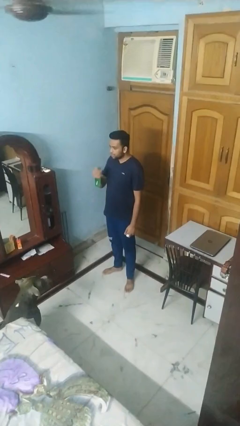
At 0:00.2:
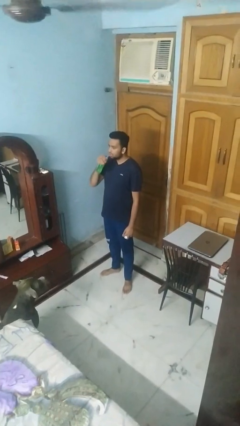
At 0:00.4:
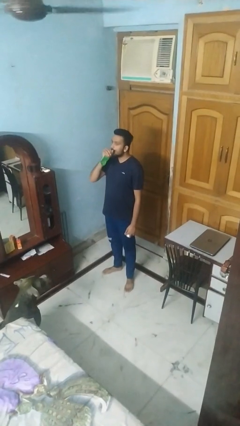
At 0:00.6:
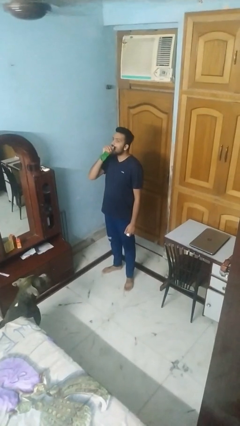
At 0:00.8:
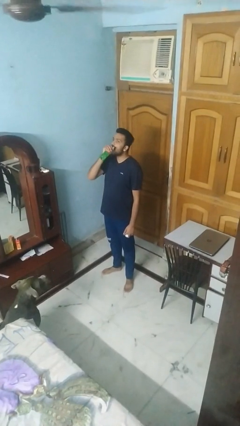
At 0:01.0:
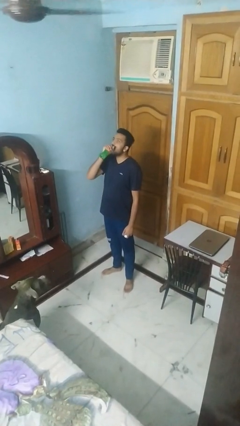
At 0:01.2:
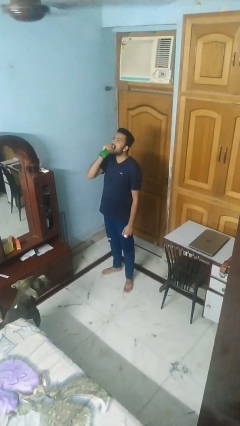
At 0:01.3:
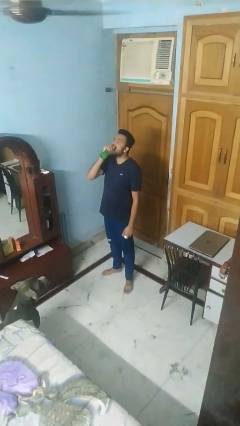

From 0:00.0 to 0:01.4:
person drinks from bottle

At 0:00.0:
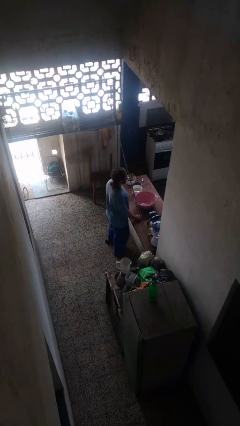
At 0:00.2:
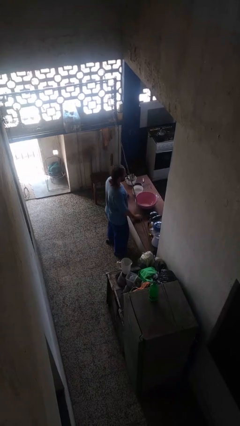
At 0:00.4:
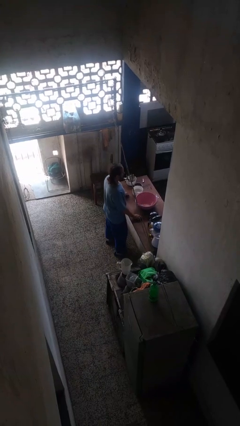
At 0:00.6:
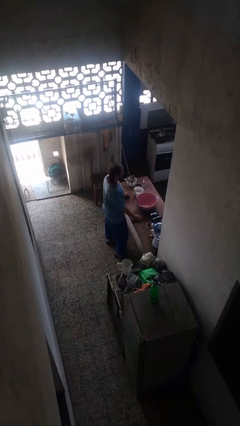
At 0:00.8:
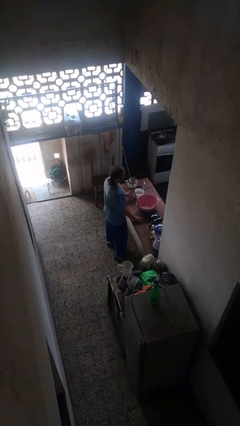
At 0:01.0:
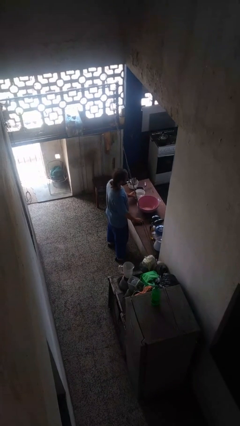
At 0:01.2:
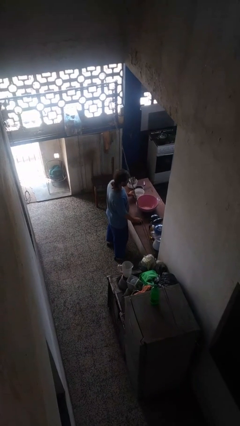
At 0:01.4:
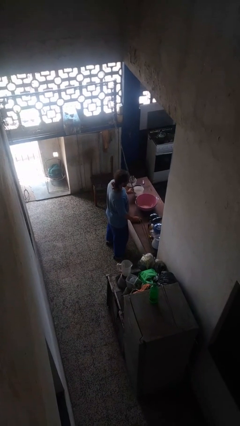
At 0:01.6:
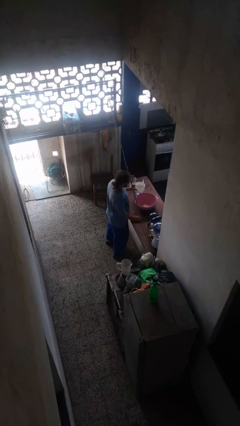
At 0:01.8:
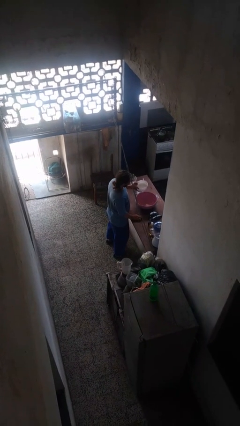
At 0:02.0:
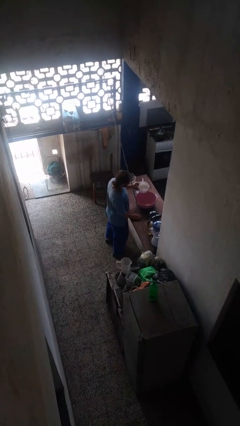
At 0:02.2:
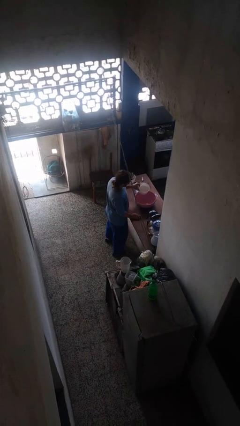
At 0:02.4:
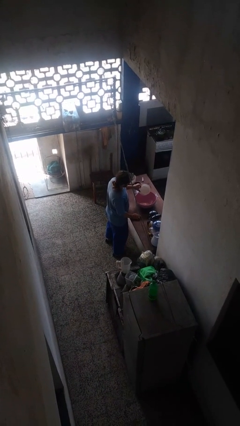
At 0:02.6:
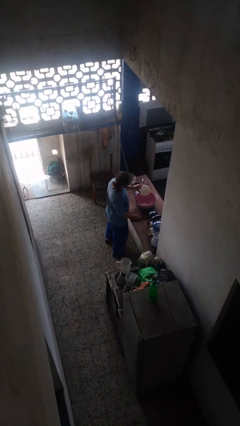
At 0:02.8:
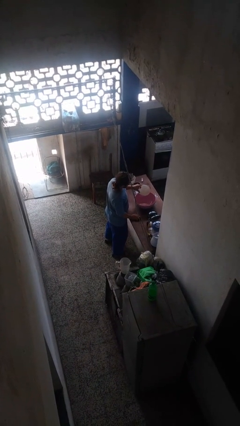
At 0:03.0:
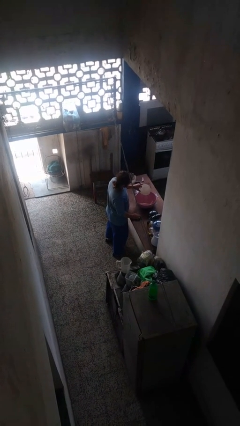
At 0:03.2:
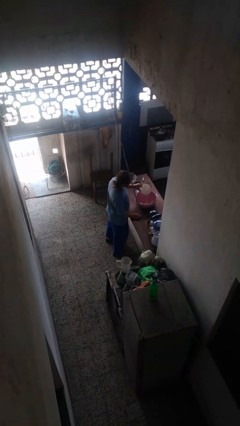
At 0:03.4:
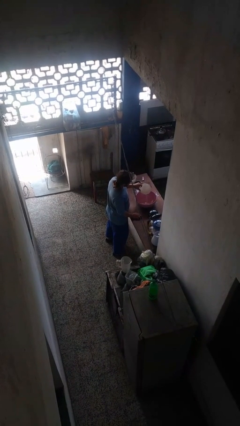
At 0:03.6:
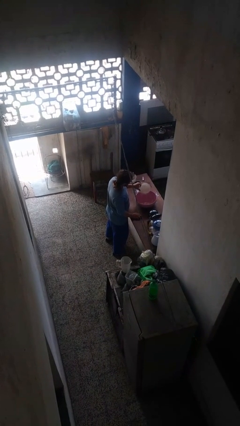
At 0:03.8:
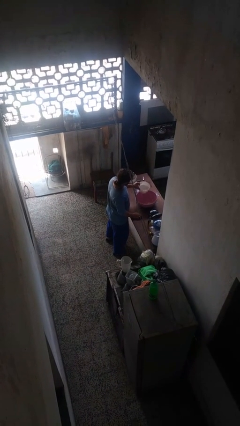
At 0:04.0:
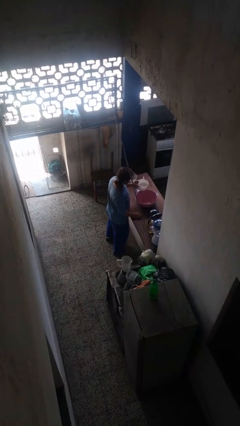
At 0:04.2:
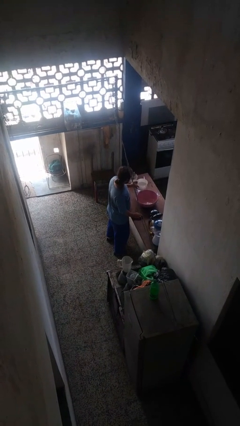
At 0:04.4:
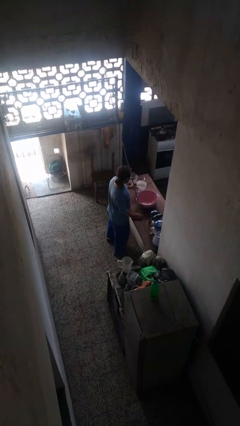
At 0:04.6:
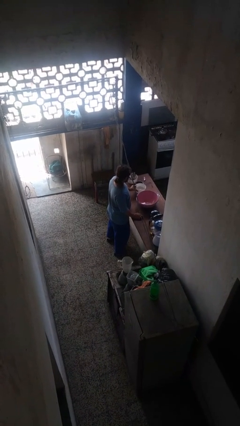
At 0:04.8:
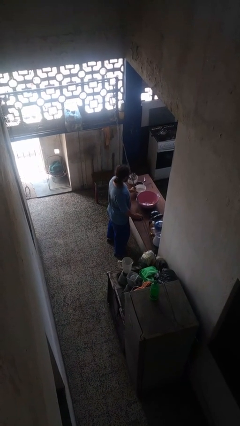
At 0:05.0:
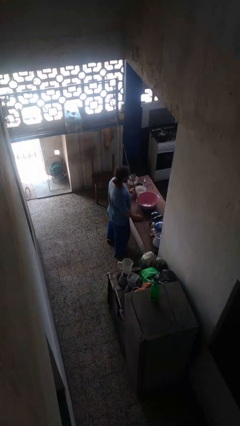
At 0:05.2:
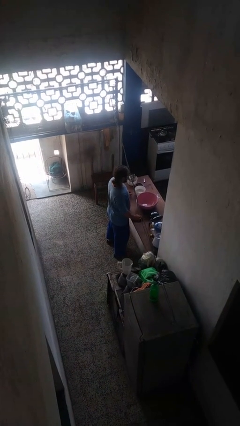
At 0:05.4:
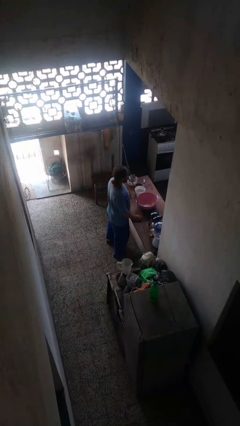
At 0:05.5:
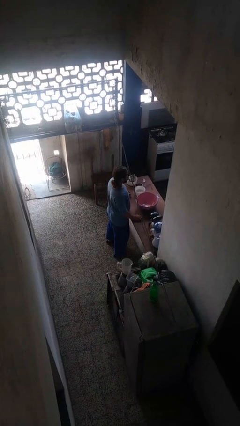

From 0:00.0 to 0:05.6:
person pours into bowl

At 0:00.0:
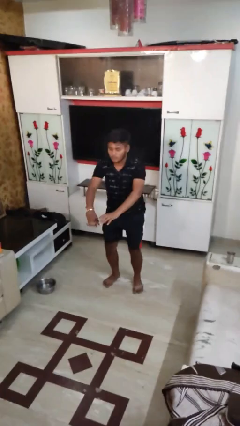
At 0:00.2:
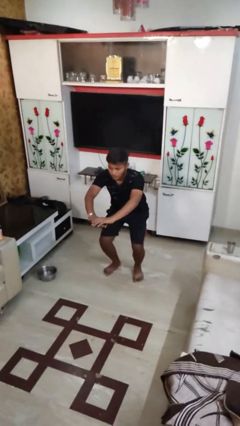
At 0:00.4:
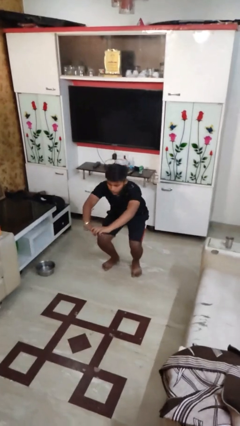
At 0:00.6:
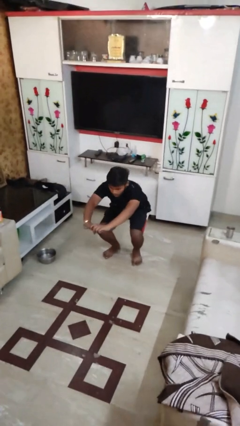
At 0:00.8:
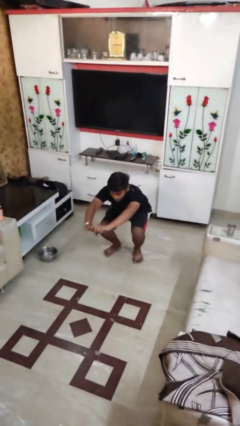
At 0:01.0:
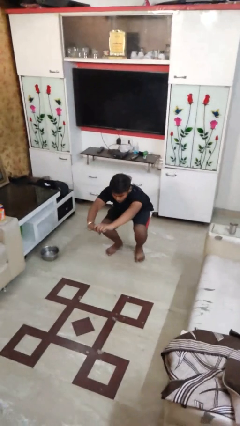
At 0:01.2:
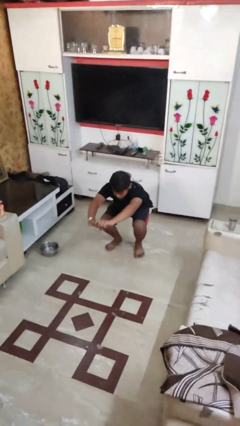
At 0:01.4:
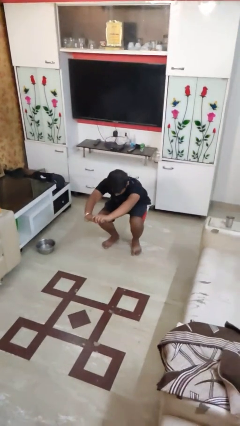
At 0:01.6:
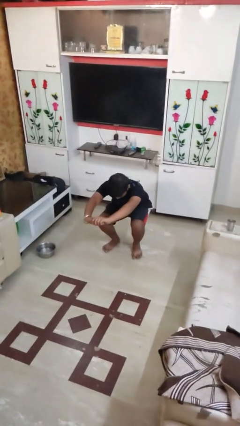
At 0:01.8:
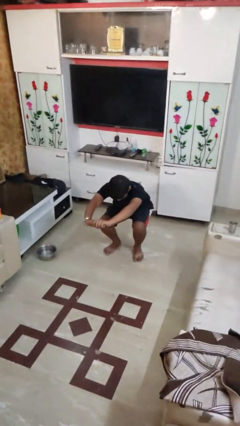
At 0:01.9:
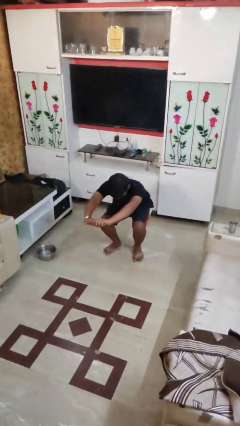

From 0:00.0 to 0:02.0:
person squats

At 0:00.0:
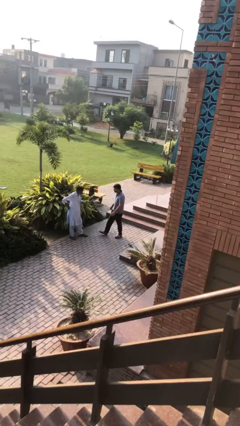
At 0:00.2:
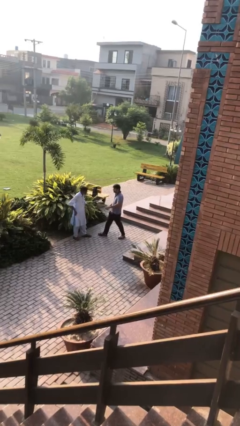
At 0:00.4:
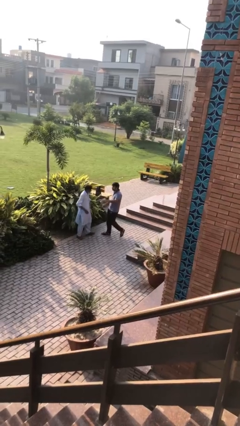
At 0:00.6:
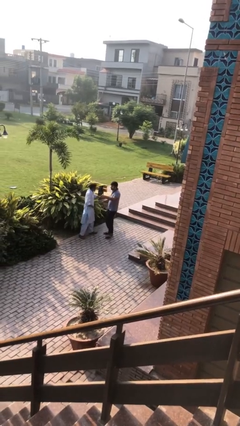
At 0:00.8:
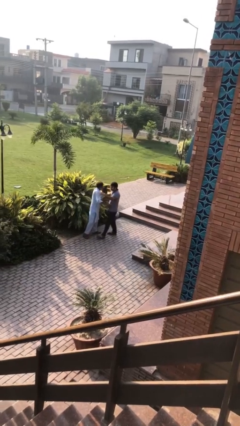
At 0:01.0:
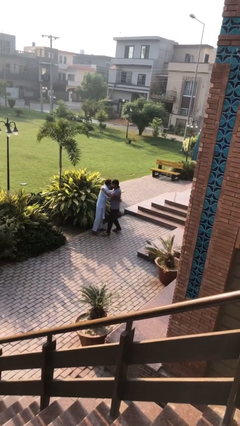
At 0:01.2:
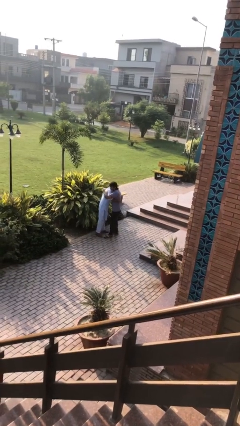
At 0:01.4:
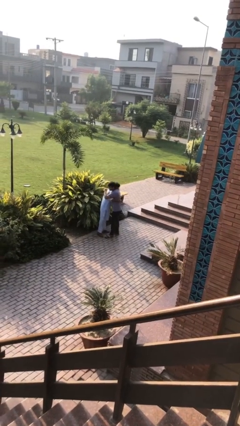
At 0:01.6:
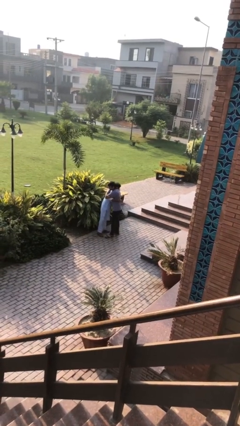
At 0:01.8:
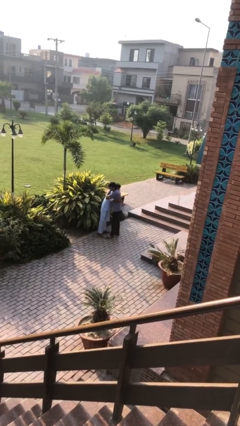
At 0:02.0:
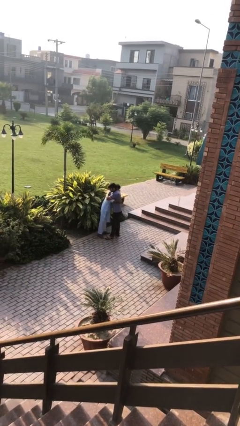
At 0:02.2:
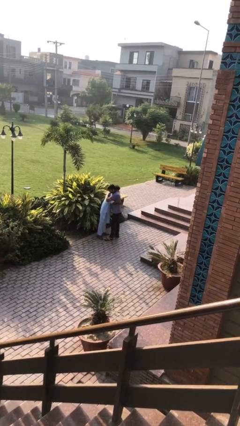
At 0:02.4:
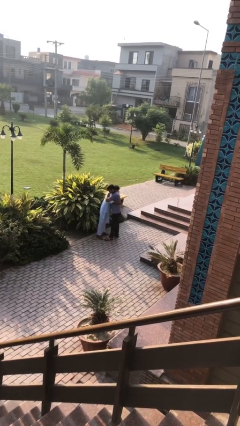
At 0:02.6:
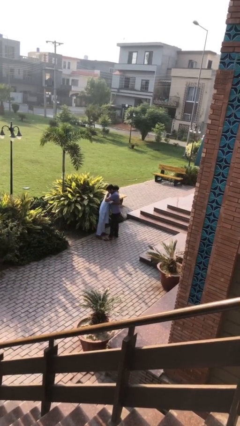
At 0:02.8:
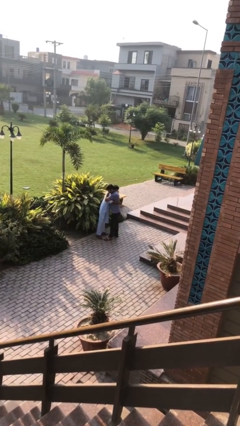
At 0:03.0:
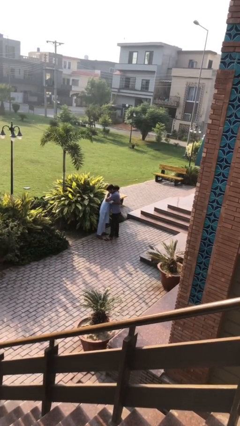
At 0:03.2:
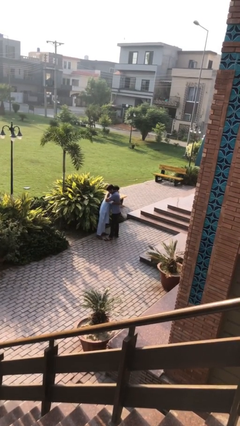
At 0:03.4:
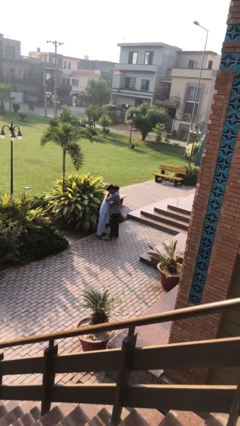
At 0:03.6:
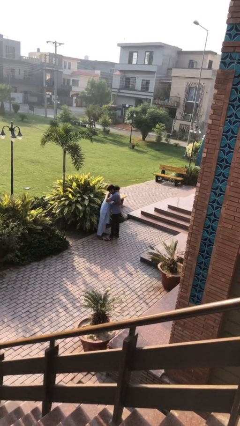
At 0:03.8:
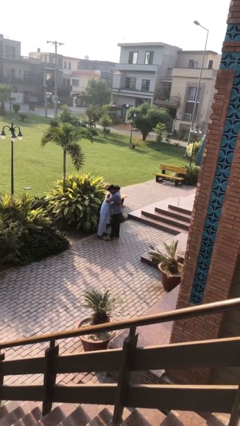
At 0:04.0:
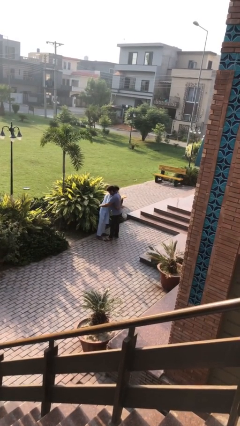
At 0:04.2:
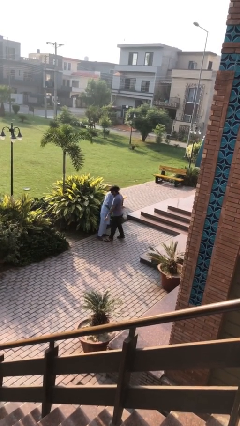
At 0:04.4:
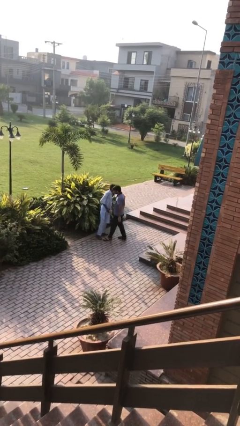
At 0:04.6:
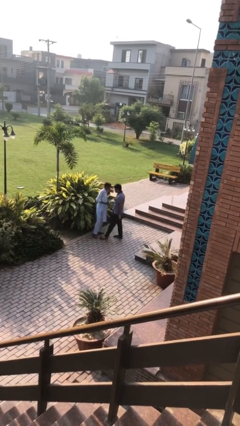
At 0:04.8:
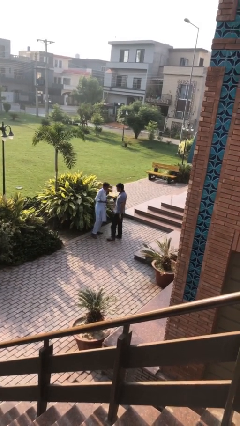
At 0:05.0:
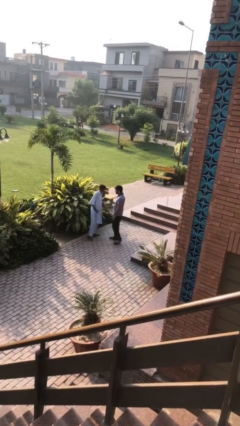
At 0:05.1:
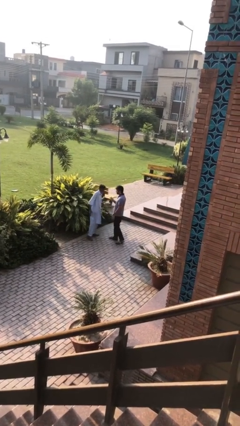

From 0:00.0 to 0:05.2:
person embraces person

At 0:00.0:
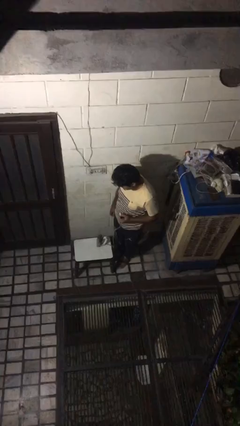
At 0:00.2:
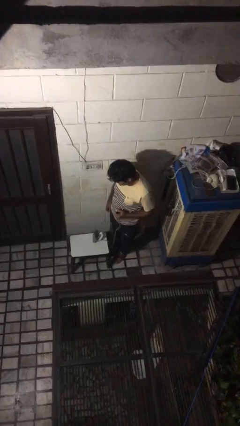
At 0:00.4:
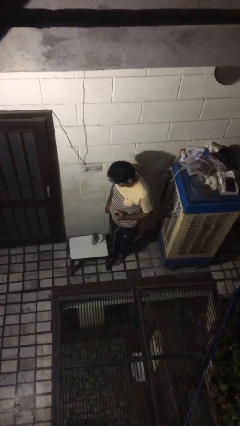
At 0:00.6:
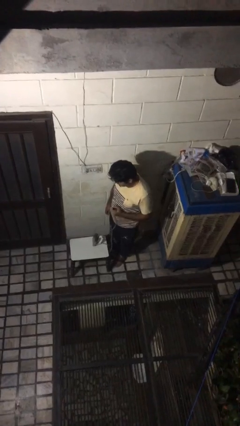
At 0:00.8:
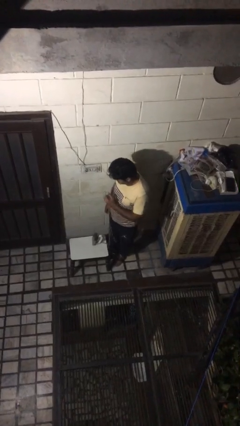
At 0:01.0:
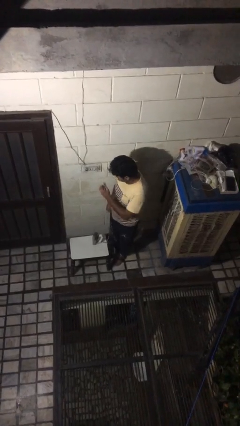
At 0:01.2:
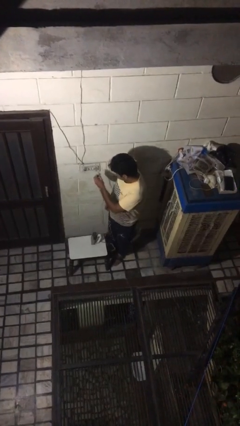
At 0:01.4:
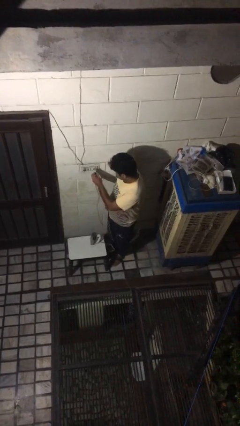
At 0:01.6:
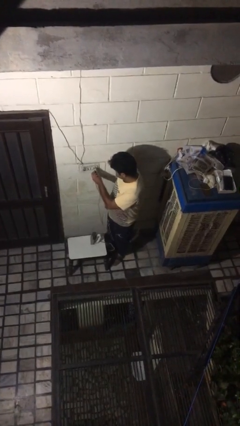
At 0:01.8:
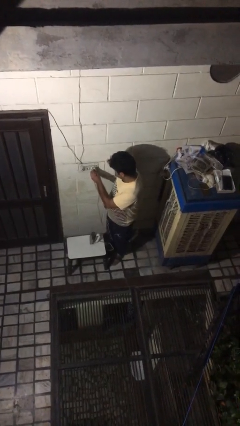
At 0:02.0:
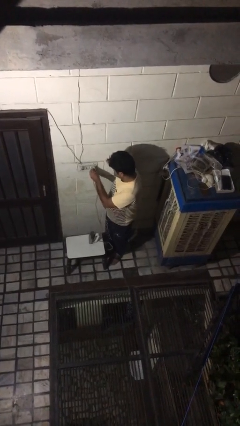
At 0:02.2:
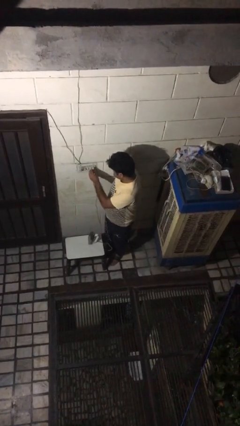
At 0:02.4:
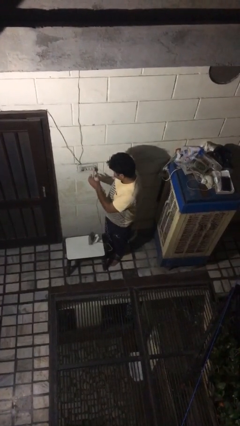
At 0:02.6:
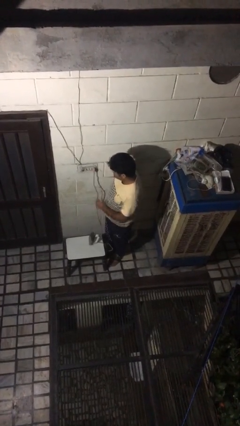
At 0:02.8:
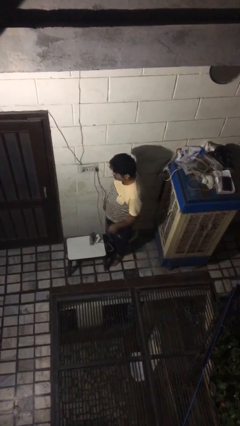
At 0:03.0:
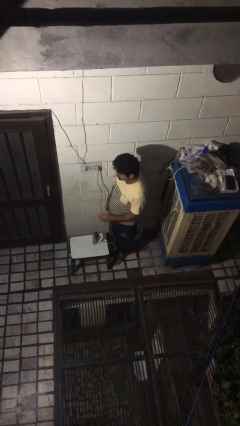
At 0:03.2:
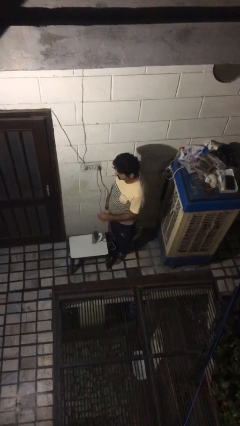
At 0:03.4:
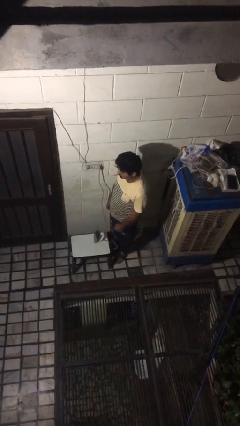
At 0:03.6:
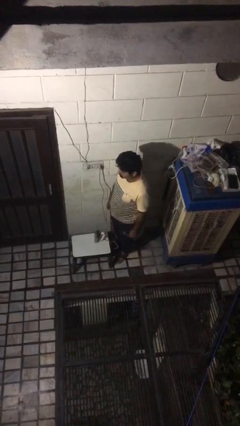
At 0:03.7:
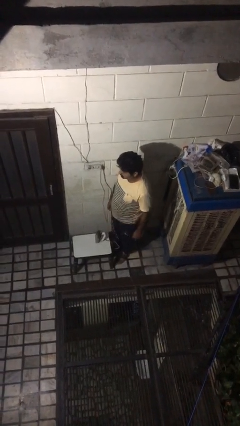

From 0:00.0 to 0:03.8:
person plugs into electrical socket
